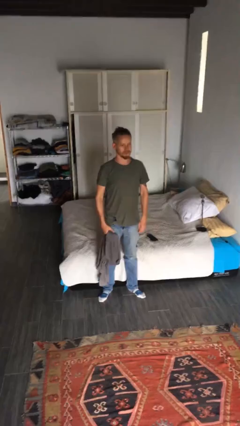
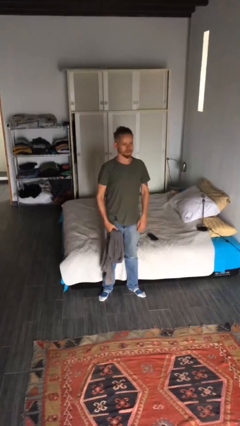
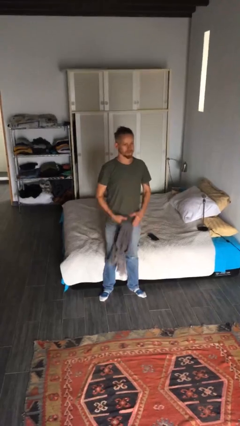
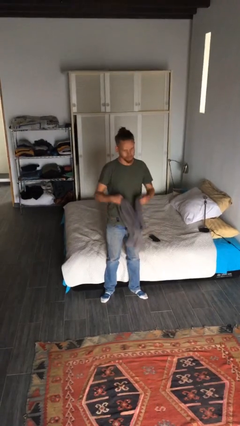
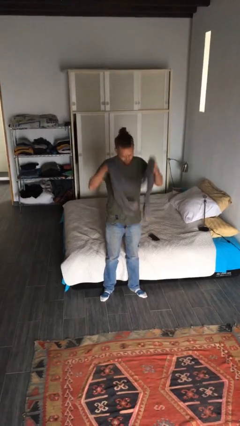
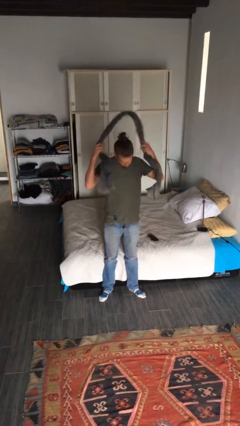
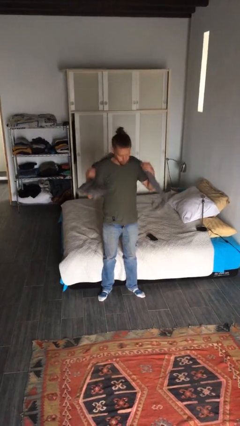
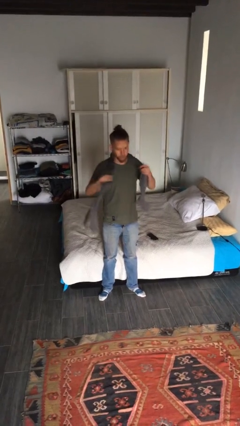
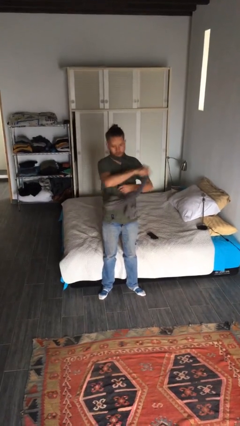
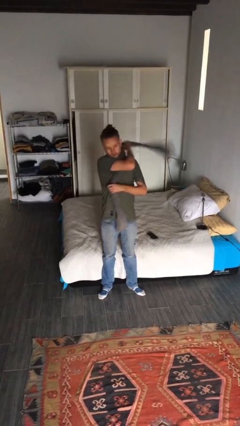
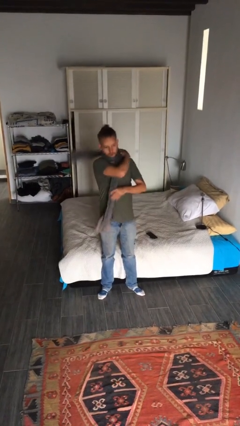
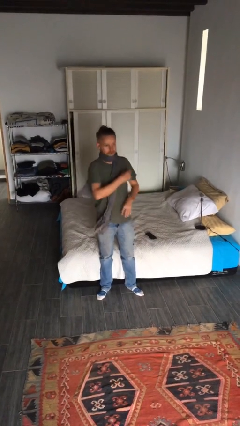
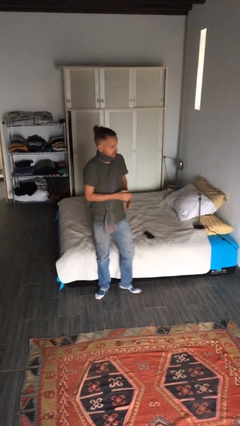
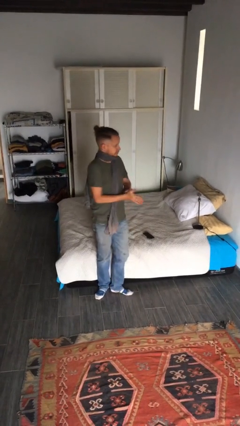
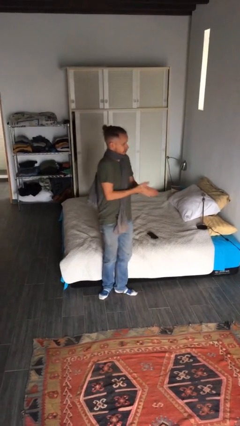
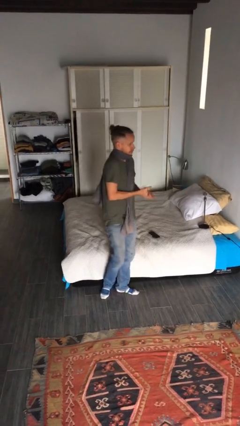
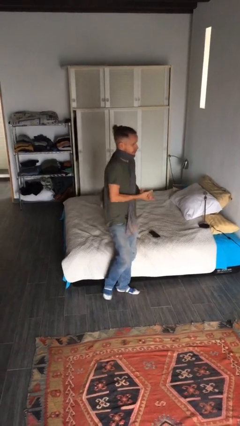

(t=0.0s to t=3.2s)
person puts on scarf

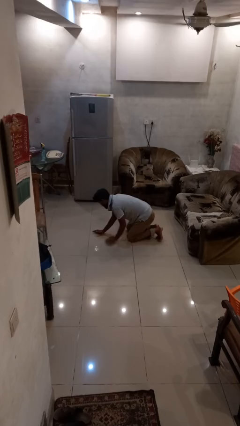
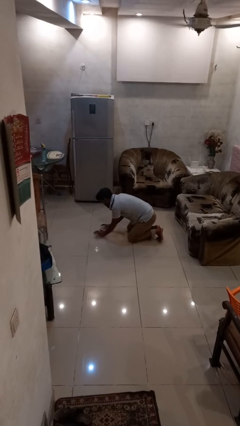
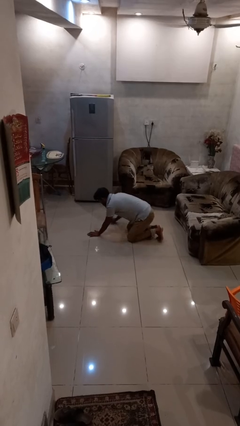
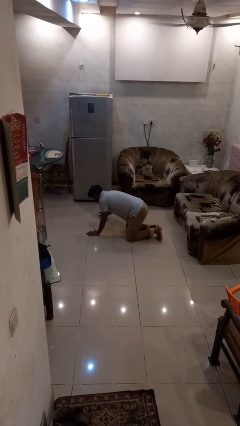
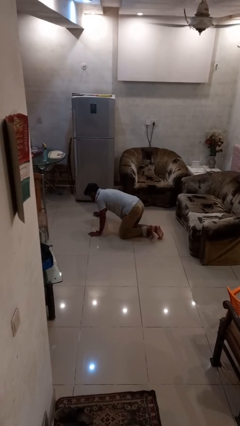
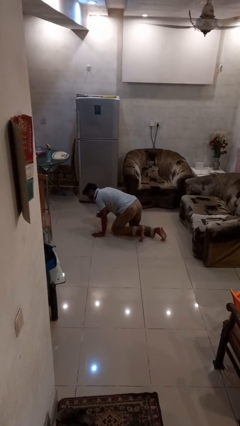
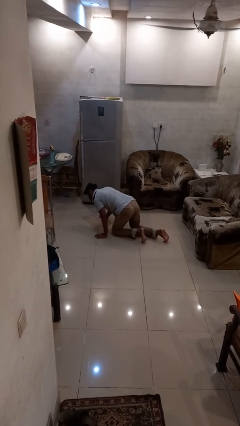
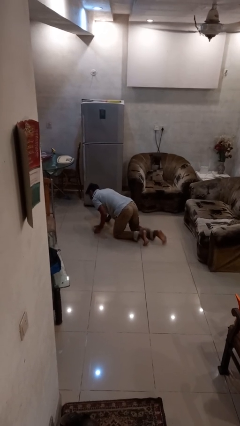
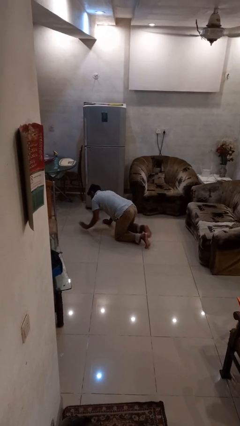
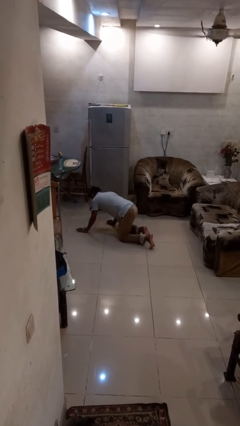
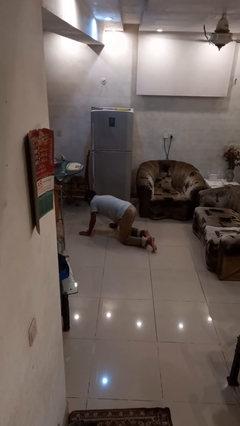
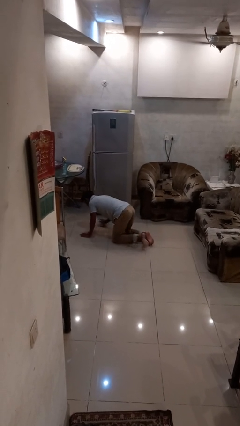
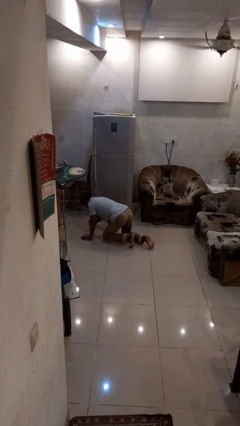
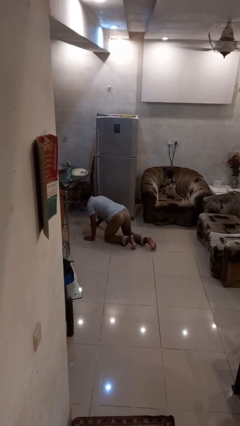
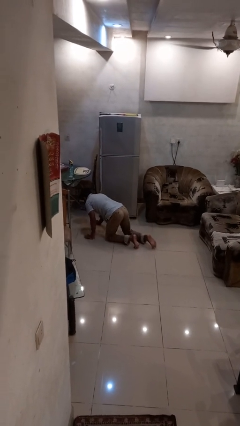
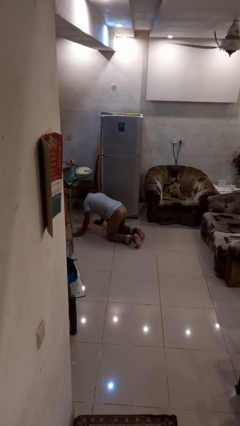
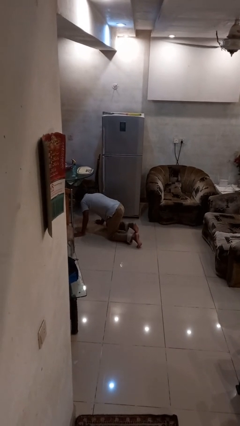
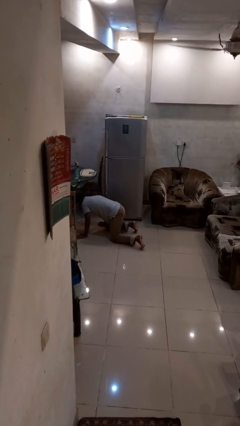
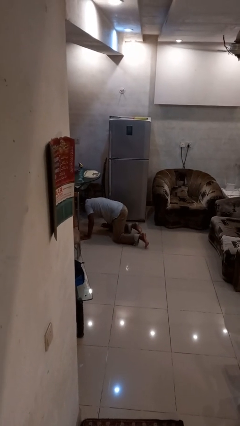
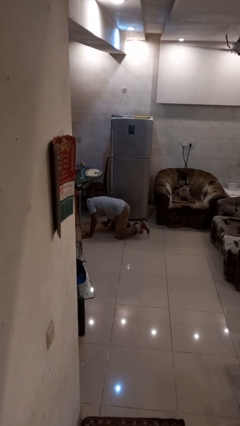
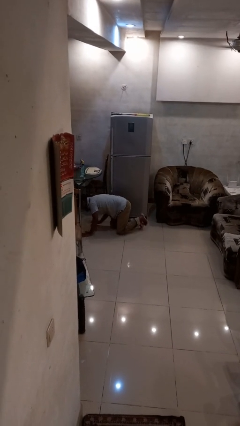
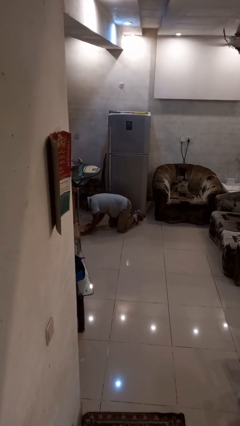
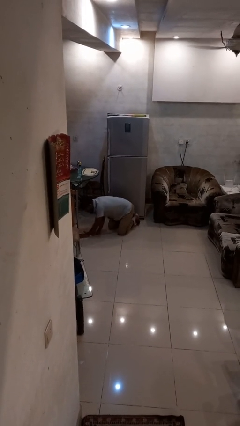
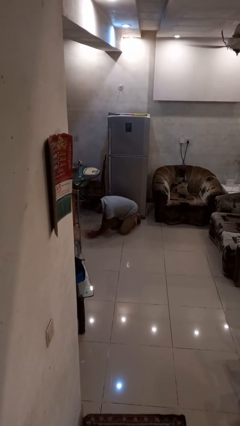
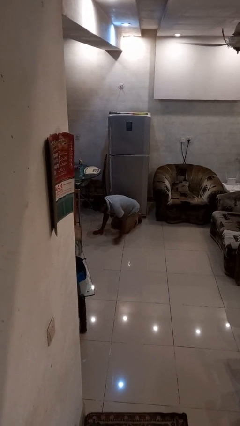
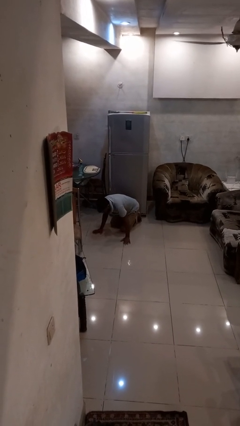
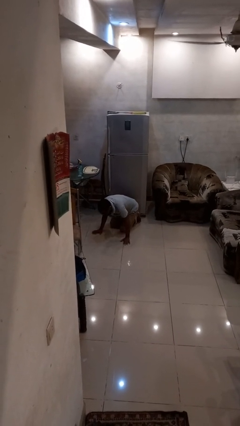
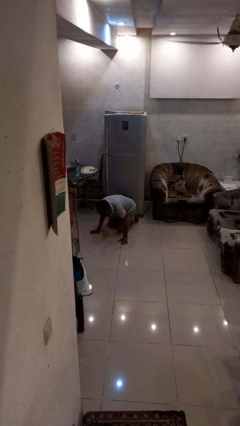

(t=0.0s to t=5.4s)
person crawls

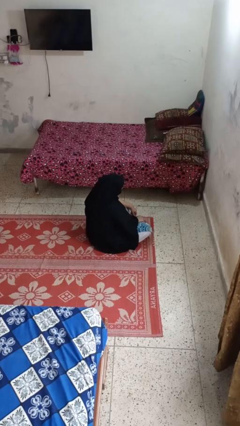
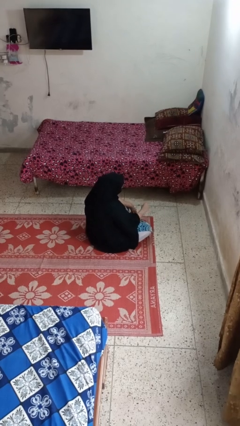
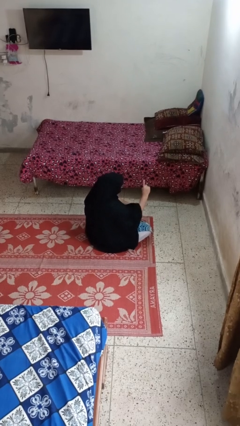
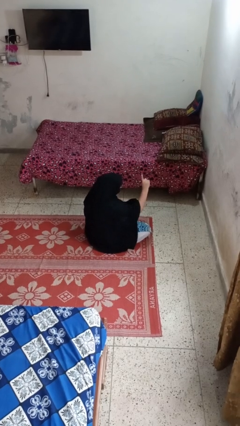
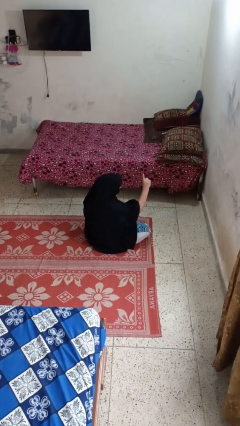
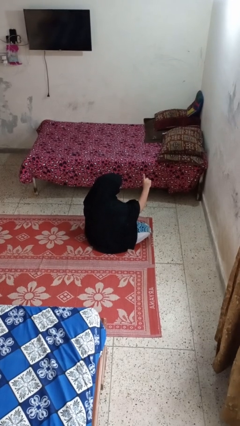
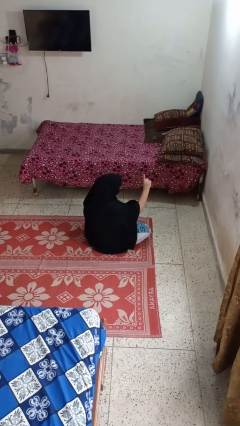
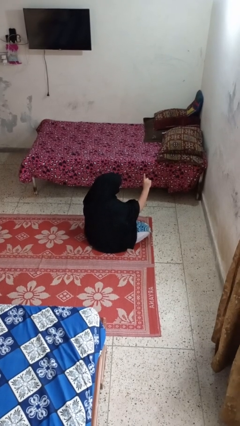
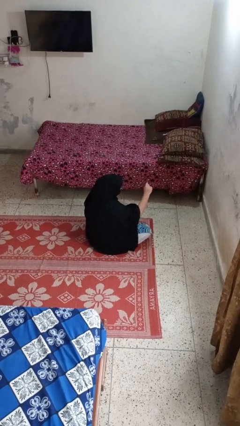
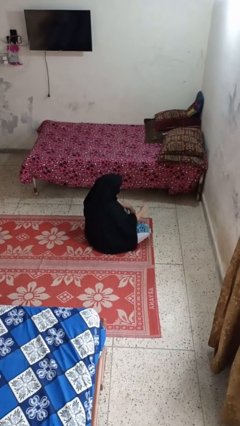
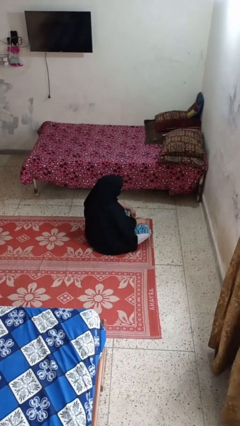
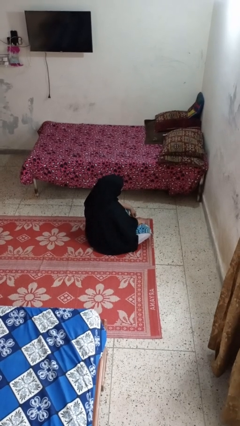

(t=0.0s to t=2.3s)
person gestures number one

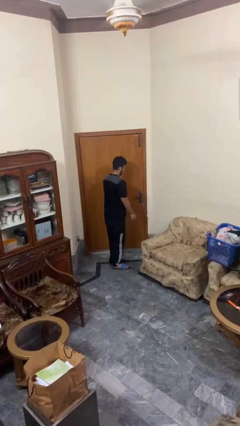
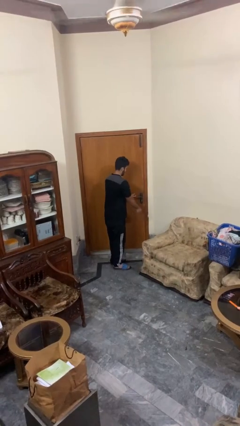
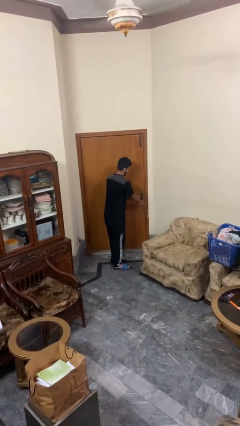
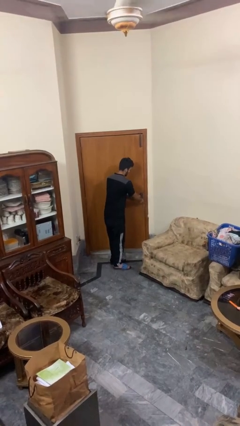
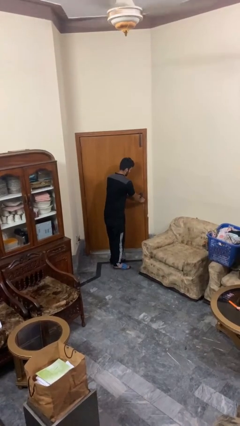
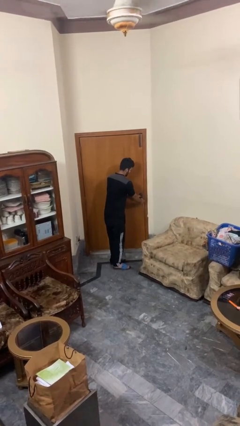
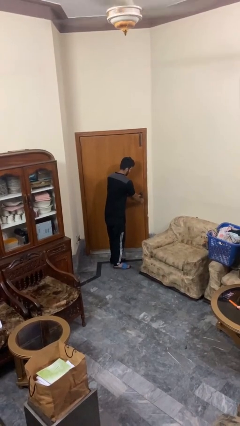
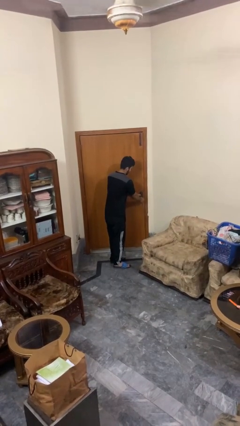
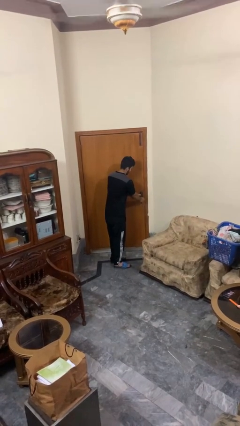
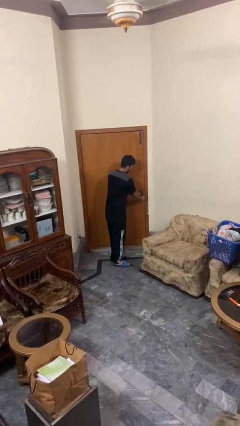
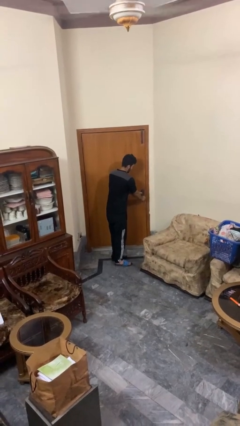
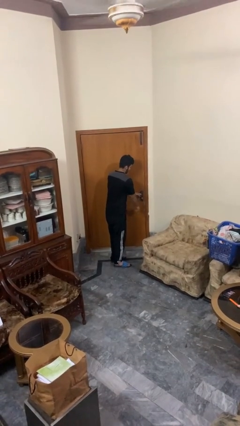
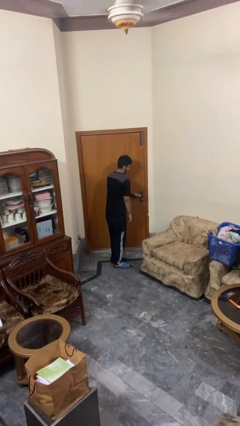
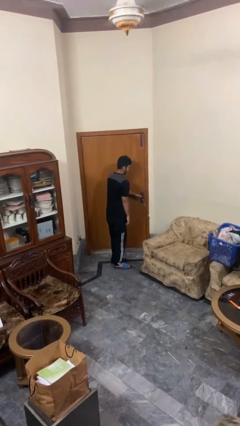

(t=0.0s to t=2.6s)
person unlocks door with keys

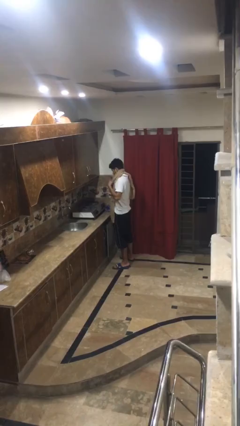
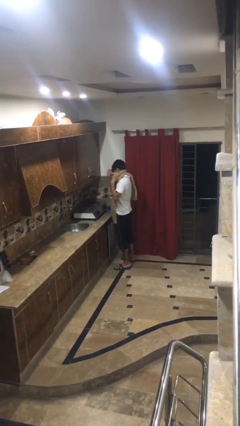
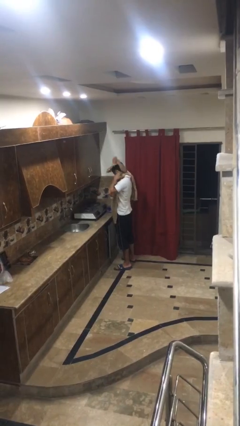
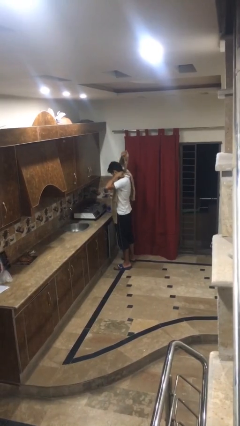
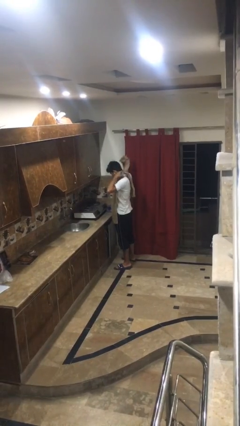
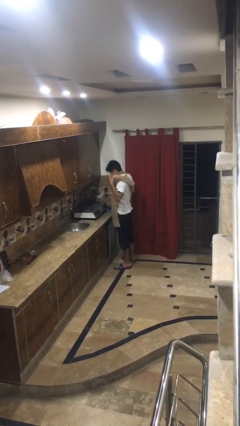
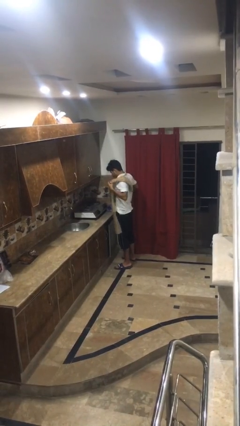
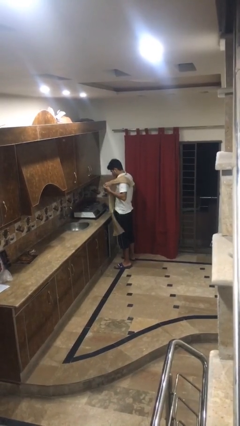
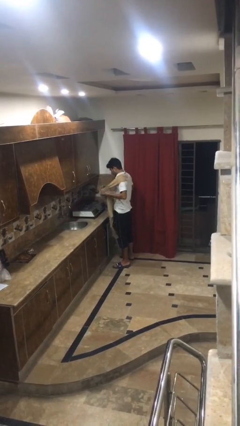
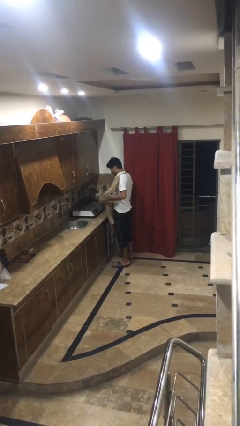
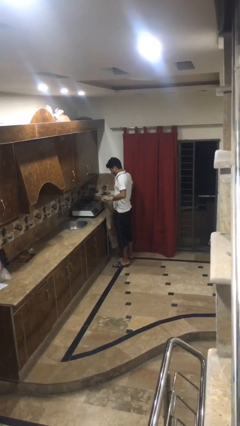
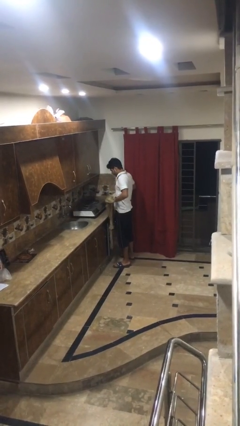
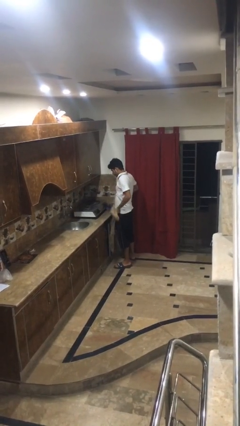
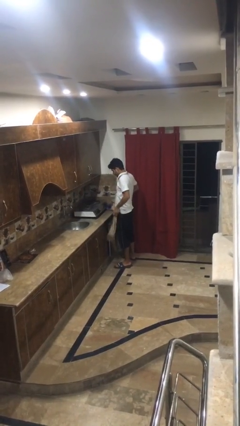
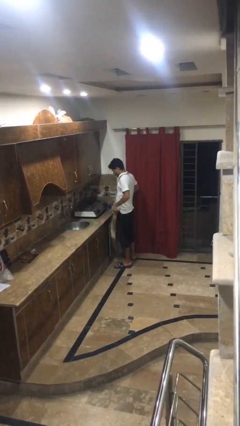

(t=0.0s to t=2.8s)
person takes off apron

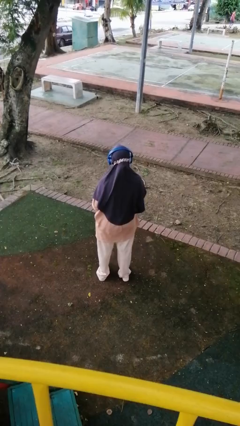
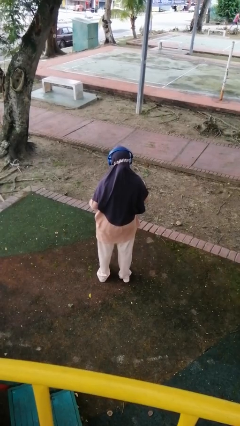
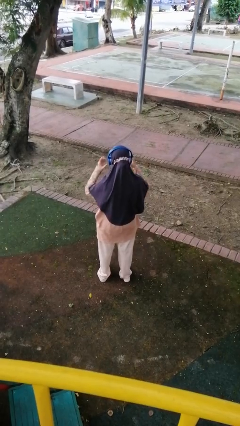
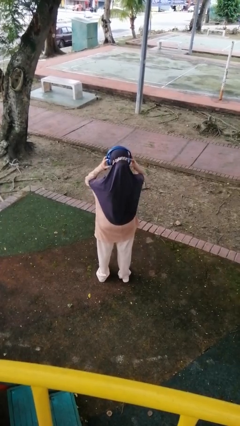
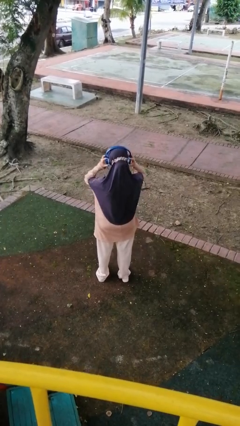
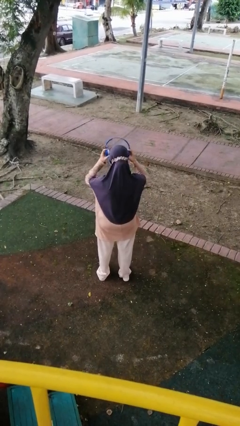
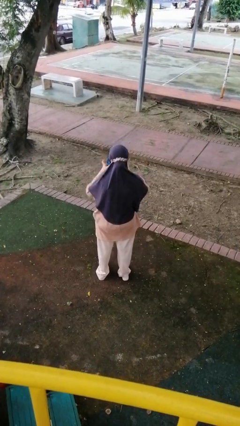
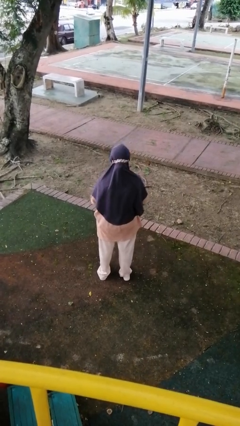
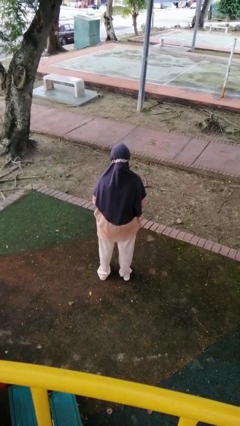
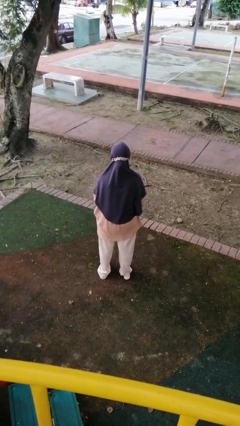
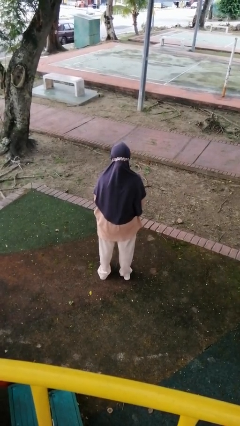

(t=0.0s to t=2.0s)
person takes off headphones
